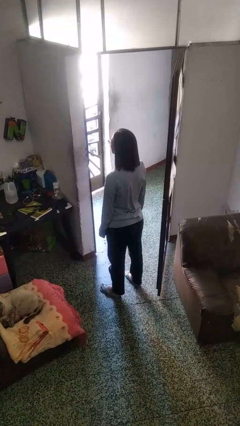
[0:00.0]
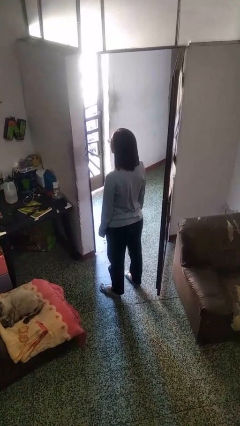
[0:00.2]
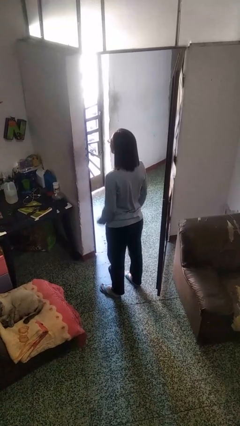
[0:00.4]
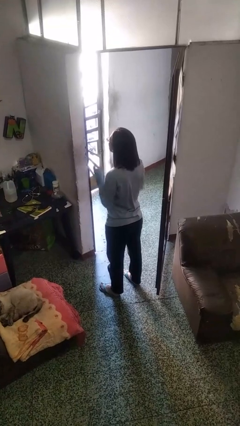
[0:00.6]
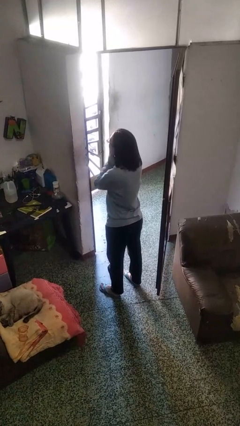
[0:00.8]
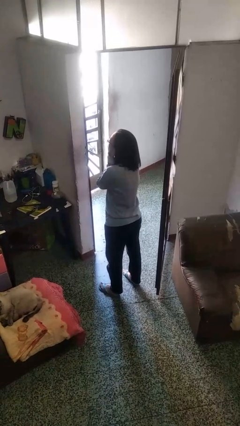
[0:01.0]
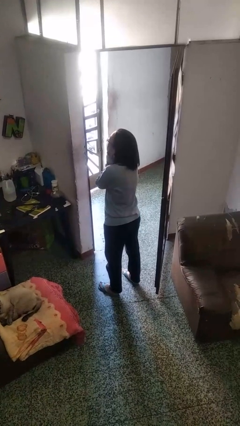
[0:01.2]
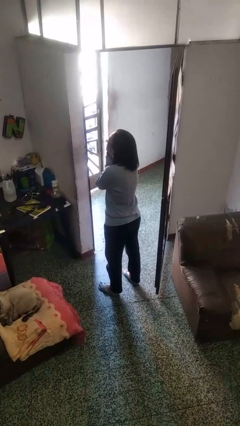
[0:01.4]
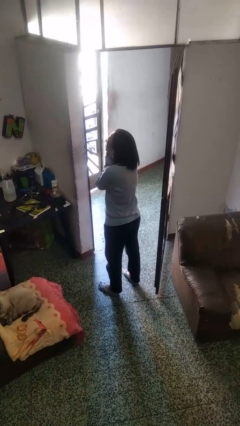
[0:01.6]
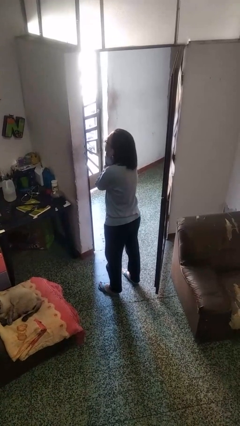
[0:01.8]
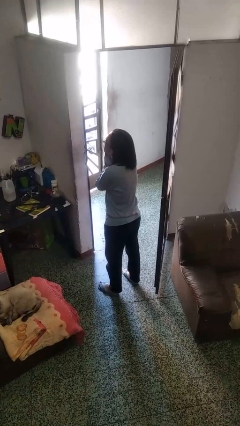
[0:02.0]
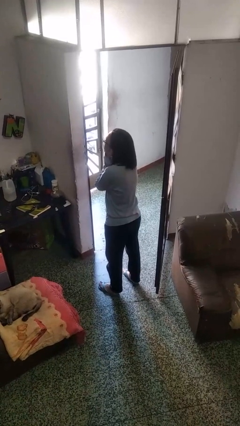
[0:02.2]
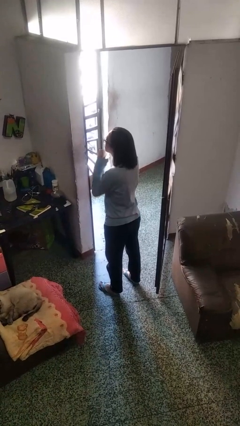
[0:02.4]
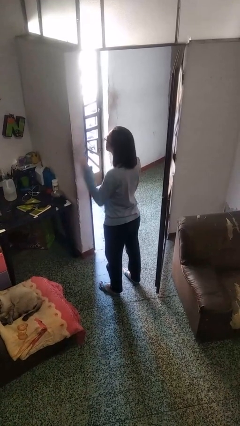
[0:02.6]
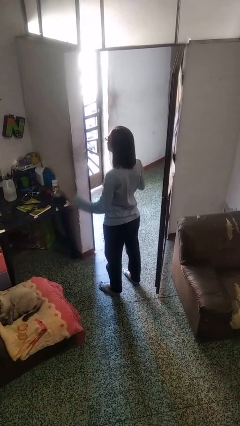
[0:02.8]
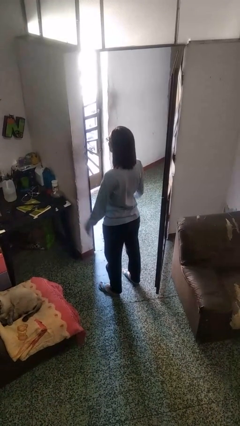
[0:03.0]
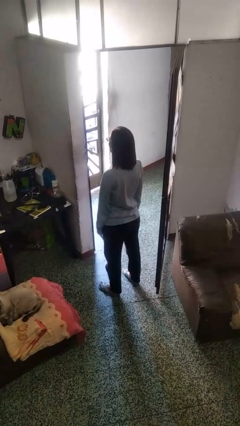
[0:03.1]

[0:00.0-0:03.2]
person puts fingers in ear

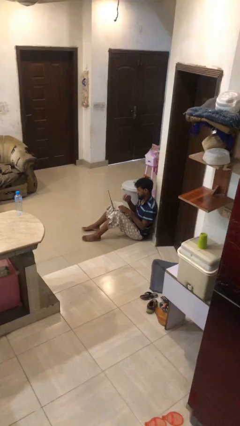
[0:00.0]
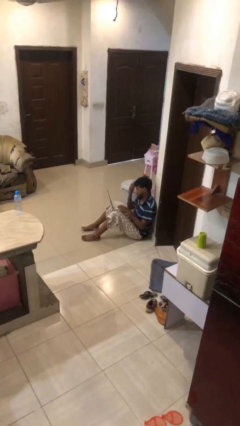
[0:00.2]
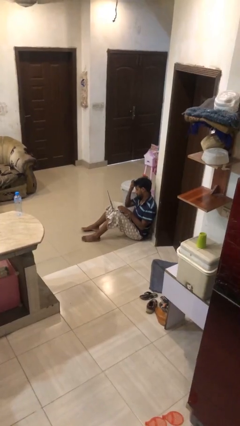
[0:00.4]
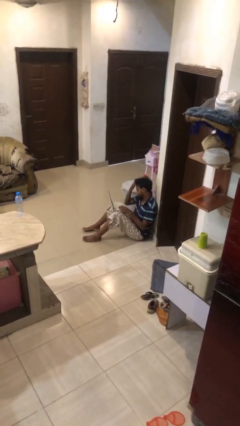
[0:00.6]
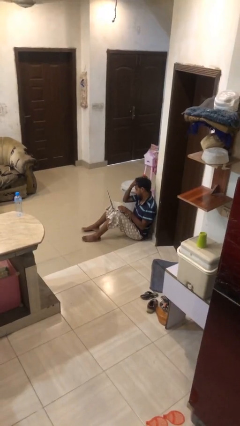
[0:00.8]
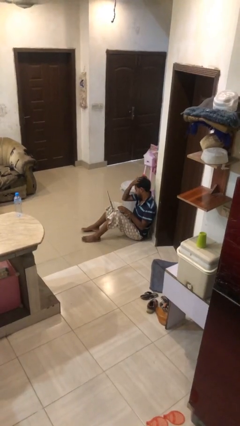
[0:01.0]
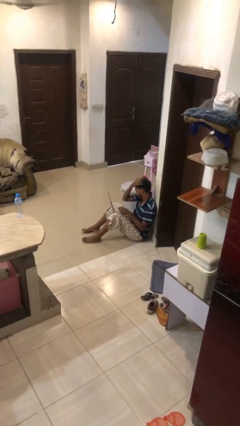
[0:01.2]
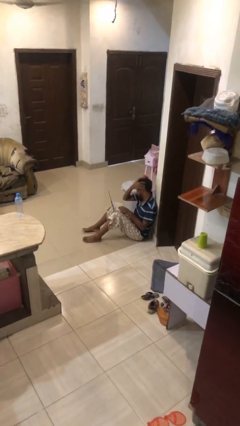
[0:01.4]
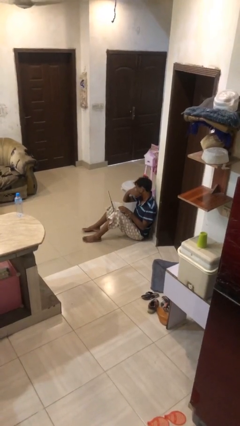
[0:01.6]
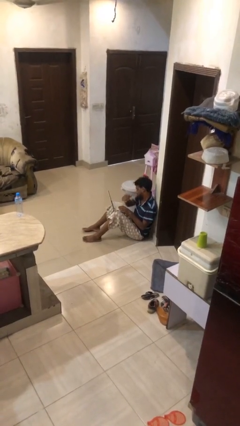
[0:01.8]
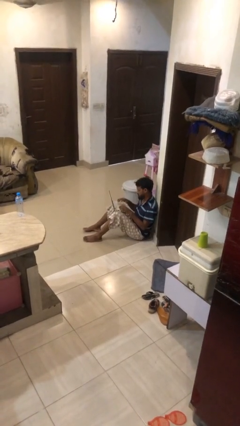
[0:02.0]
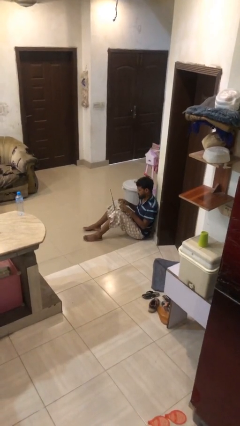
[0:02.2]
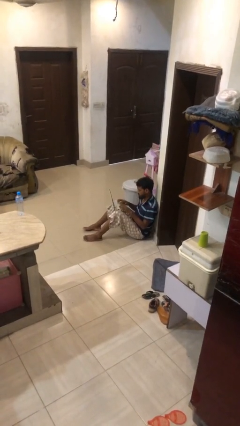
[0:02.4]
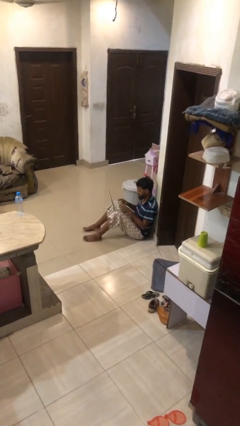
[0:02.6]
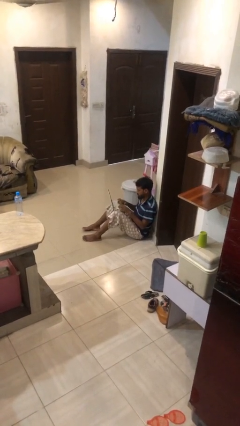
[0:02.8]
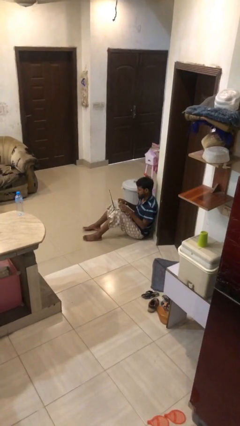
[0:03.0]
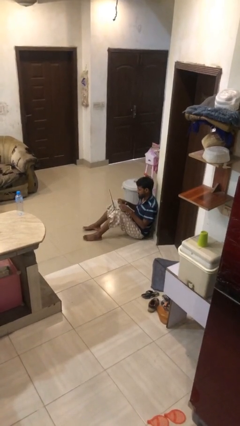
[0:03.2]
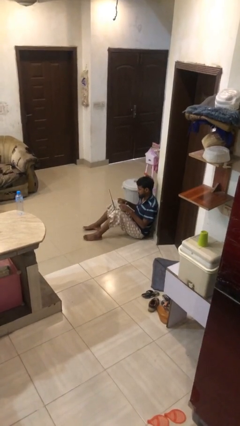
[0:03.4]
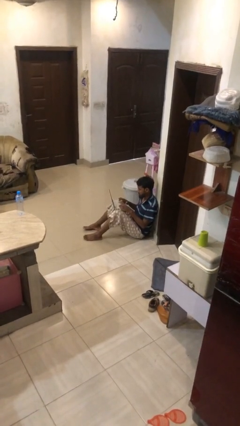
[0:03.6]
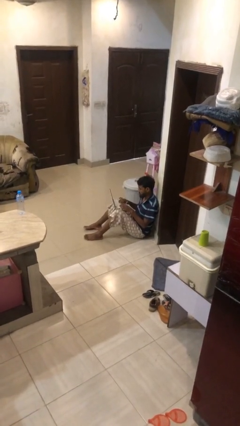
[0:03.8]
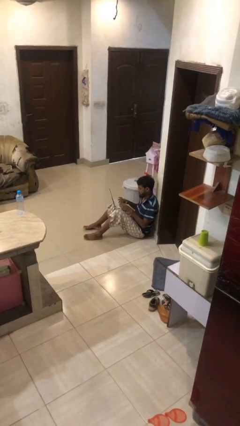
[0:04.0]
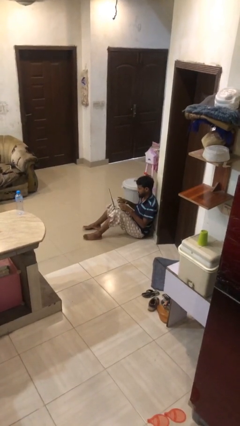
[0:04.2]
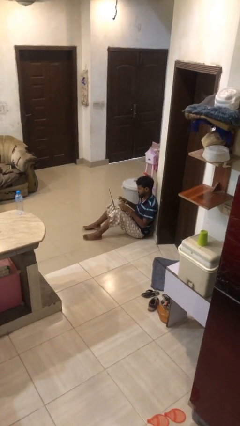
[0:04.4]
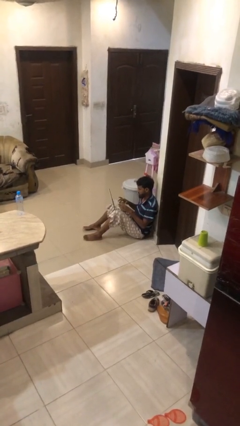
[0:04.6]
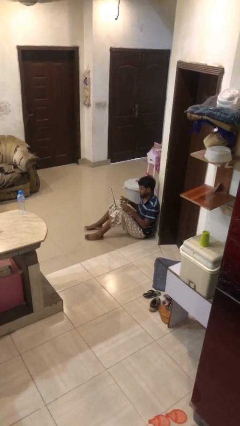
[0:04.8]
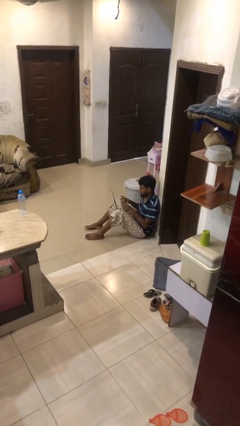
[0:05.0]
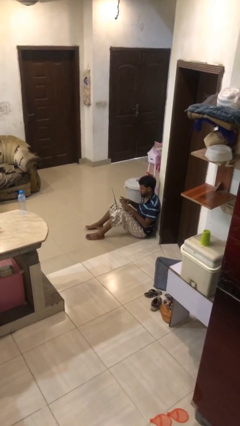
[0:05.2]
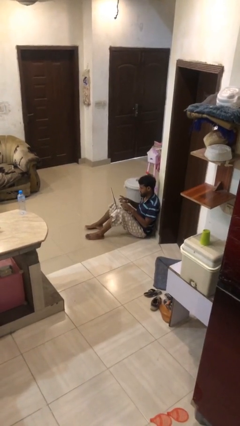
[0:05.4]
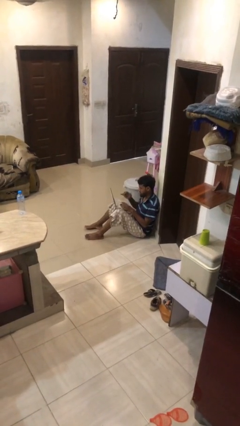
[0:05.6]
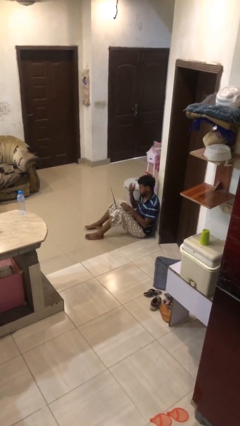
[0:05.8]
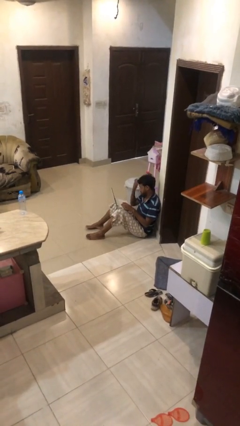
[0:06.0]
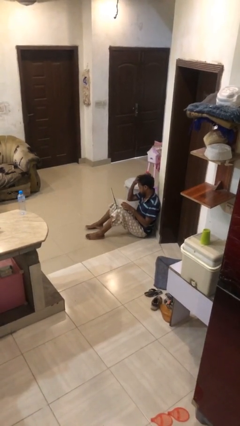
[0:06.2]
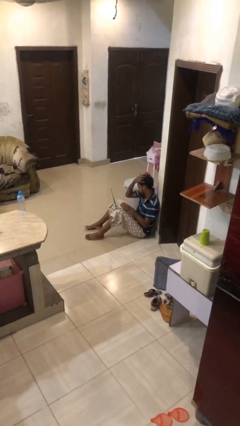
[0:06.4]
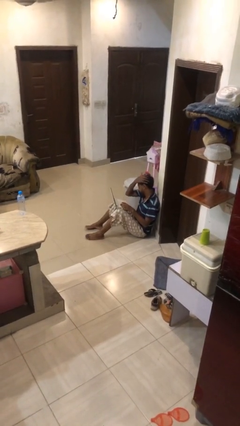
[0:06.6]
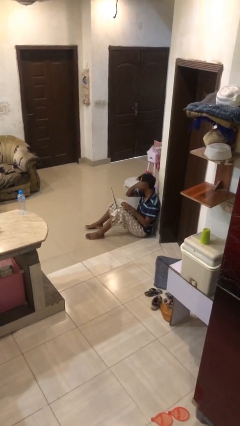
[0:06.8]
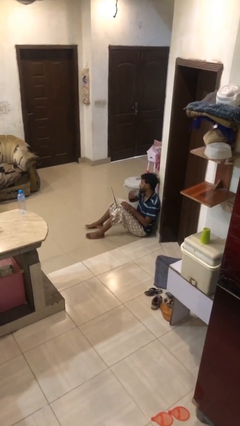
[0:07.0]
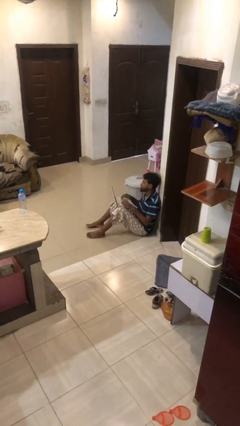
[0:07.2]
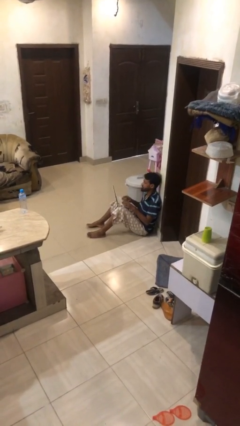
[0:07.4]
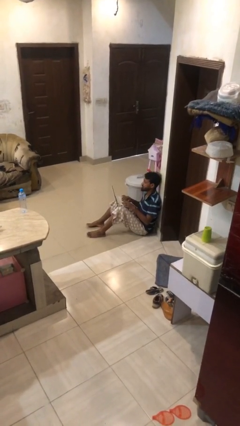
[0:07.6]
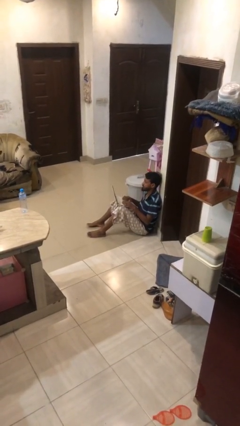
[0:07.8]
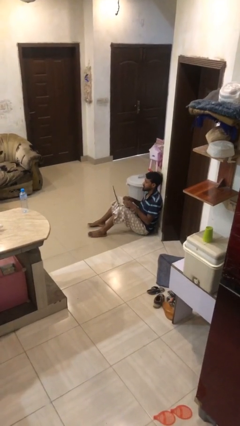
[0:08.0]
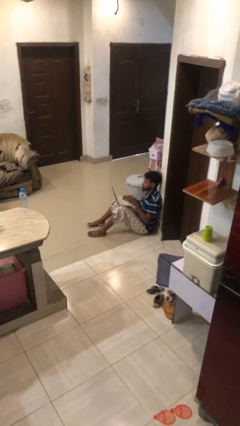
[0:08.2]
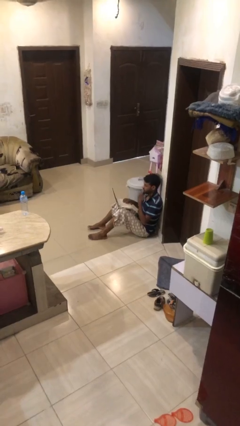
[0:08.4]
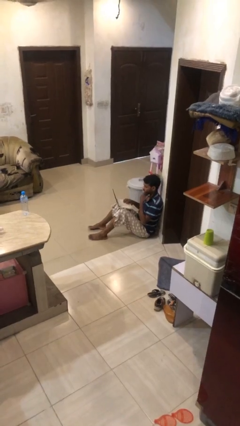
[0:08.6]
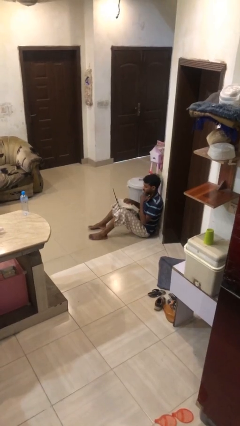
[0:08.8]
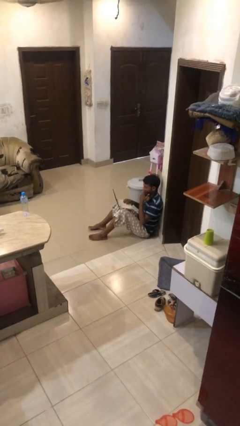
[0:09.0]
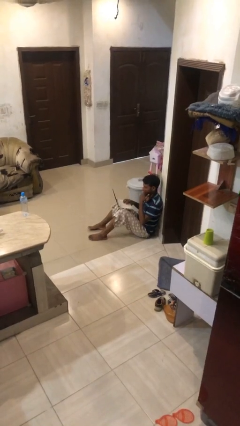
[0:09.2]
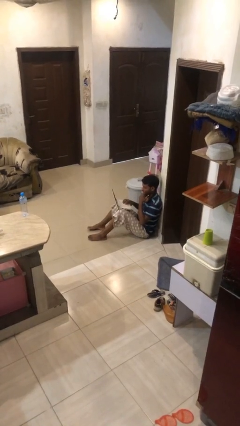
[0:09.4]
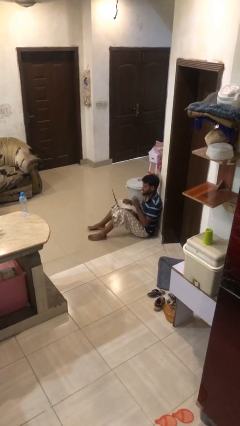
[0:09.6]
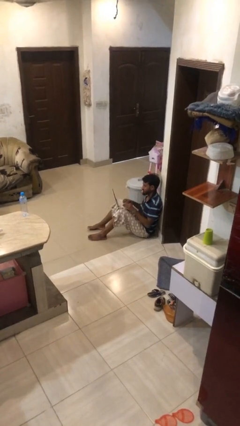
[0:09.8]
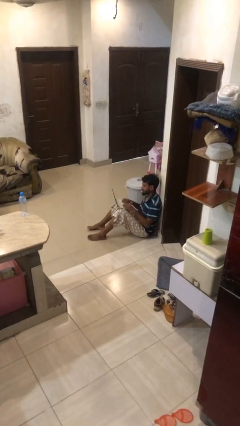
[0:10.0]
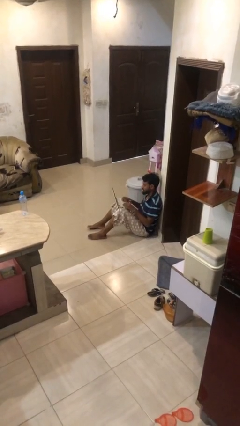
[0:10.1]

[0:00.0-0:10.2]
person interacts with laptop

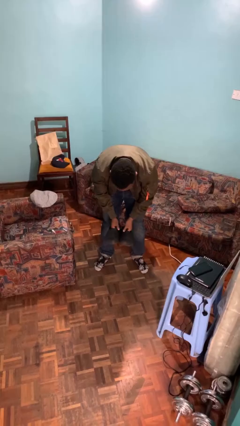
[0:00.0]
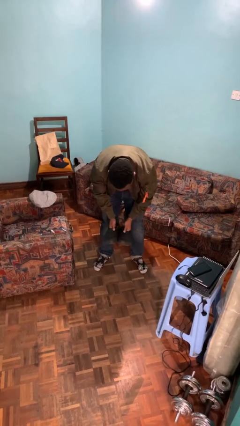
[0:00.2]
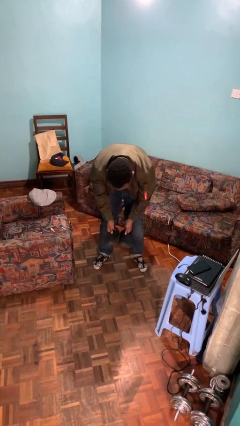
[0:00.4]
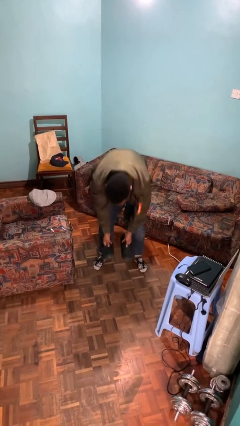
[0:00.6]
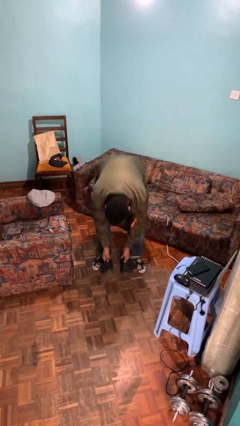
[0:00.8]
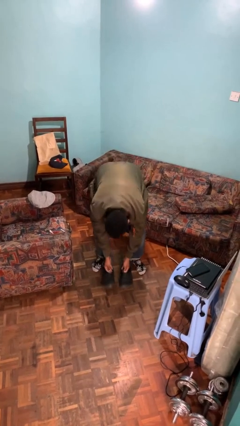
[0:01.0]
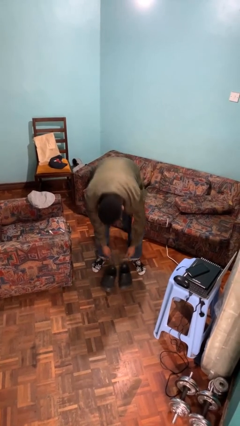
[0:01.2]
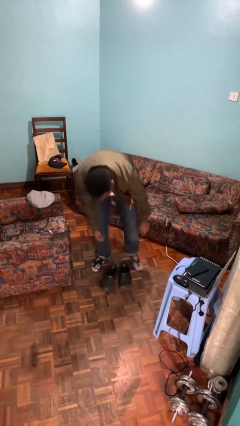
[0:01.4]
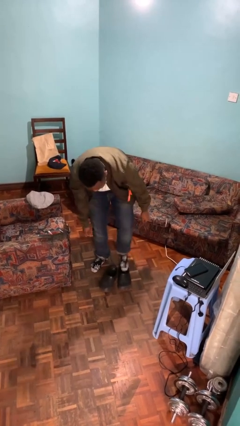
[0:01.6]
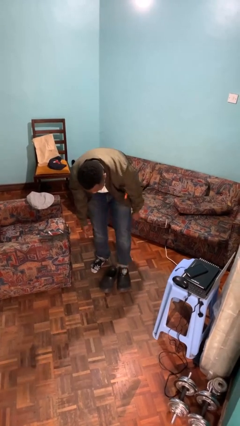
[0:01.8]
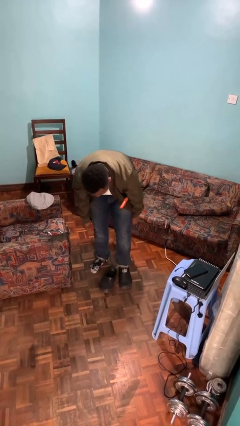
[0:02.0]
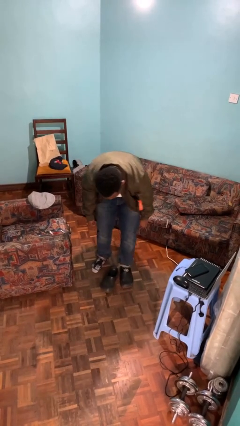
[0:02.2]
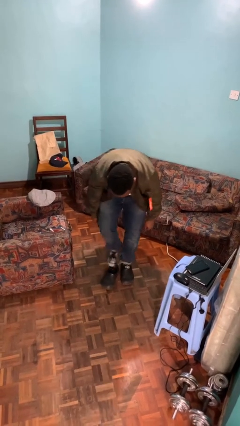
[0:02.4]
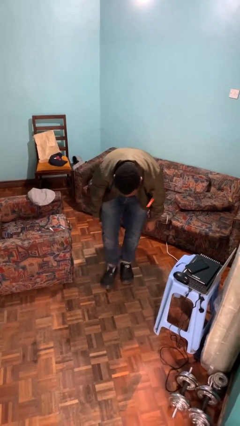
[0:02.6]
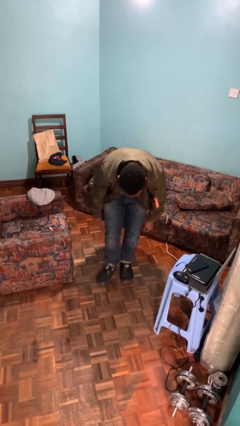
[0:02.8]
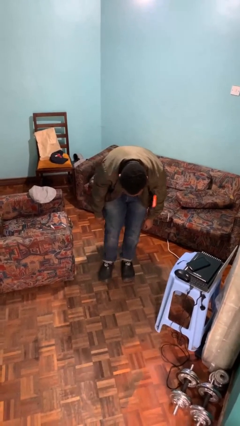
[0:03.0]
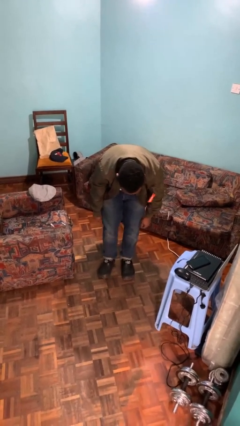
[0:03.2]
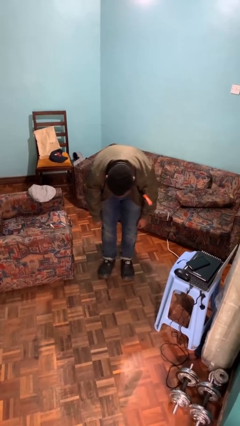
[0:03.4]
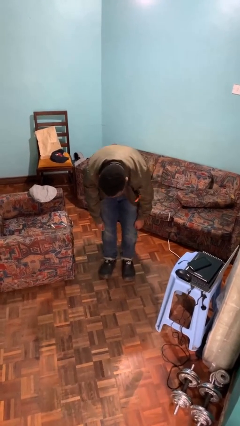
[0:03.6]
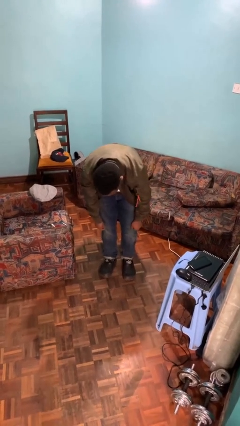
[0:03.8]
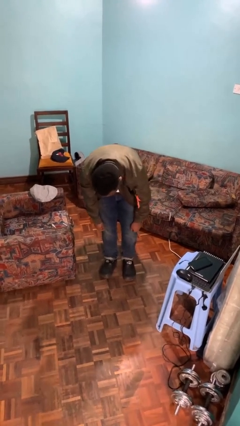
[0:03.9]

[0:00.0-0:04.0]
person puts on shoes

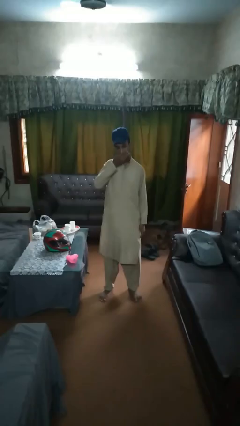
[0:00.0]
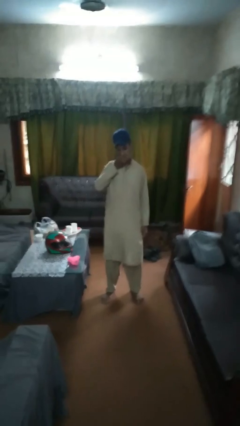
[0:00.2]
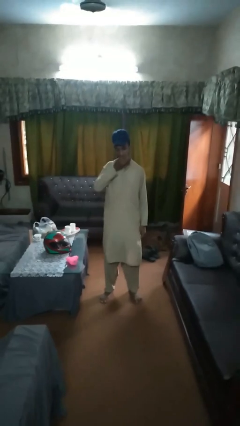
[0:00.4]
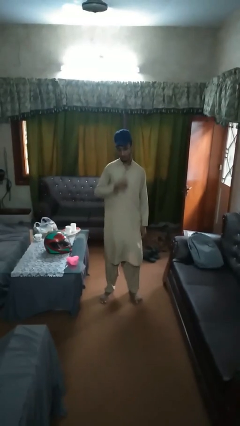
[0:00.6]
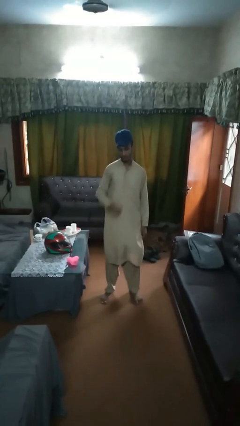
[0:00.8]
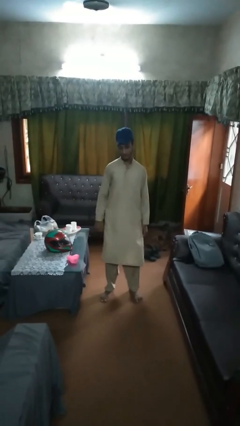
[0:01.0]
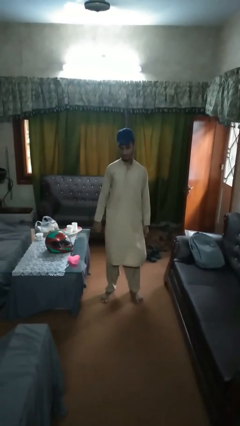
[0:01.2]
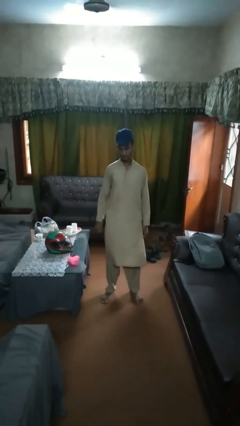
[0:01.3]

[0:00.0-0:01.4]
person eats banana
